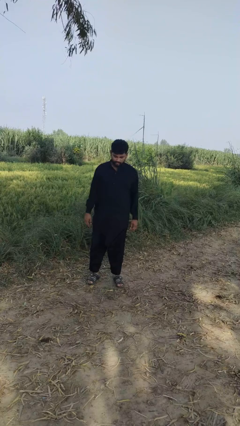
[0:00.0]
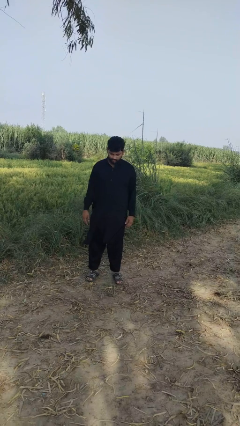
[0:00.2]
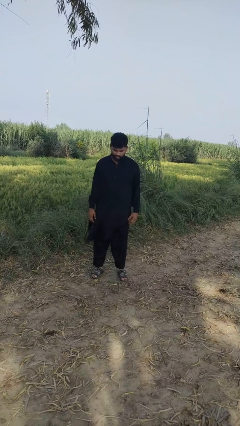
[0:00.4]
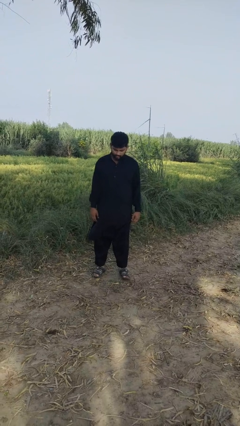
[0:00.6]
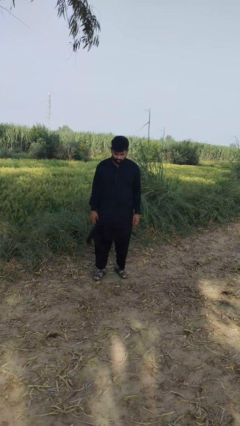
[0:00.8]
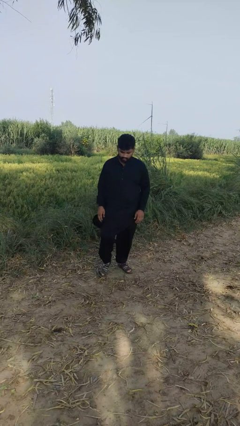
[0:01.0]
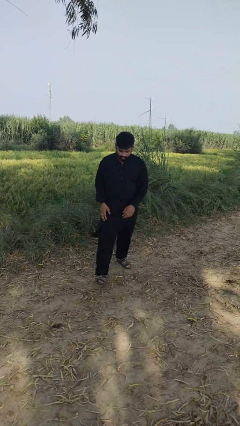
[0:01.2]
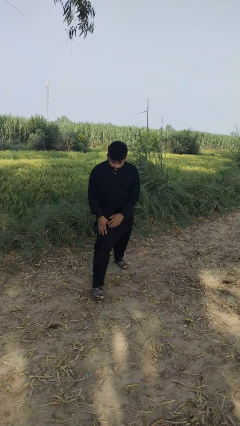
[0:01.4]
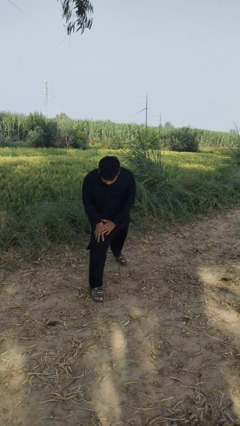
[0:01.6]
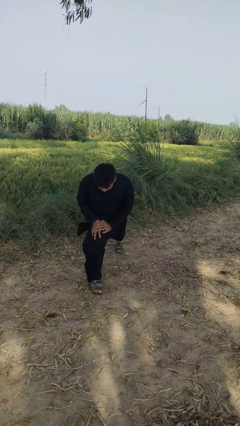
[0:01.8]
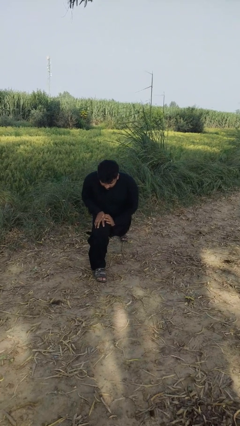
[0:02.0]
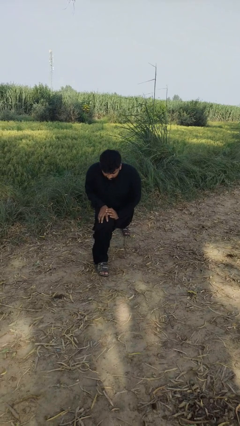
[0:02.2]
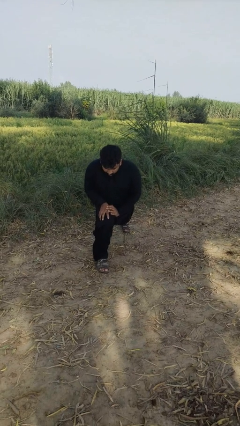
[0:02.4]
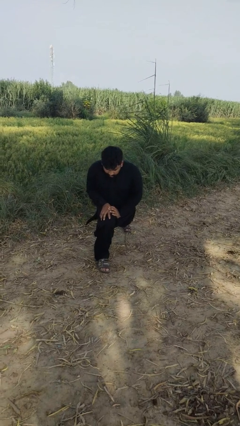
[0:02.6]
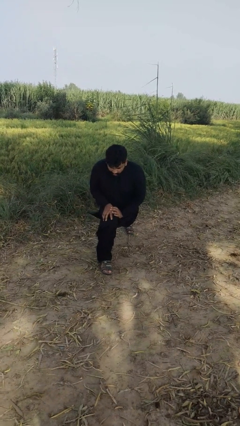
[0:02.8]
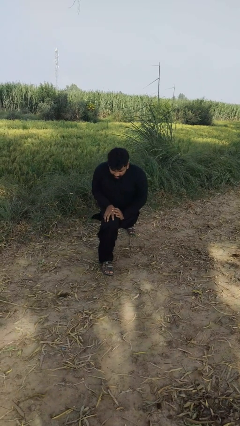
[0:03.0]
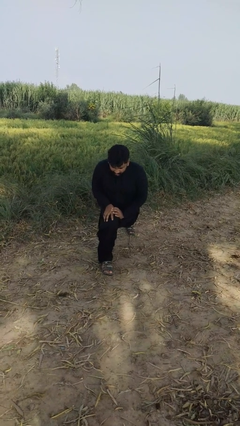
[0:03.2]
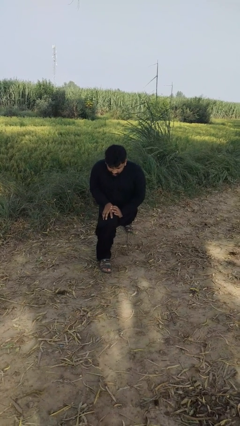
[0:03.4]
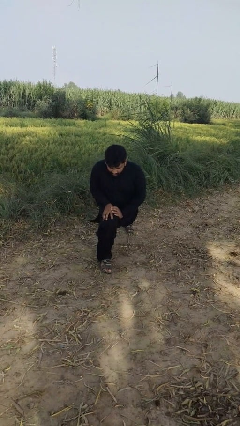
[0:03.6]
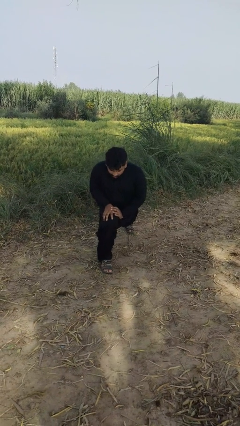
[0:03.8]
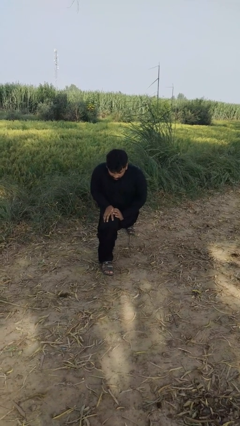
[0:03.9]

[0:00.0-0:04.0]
person exercises with lunges

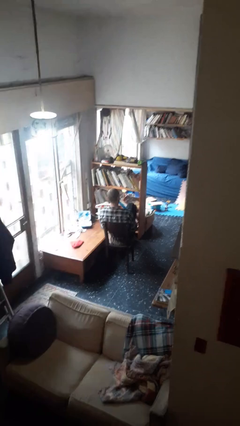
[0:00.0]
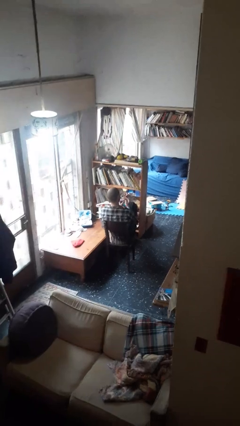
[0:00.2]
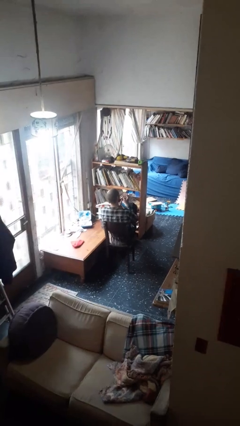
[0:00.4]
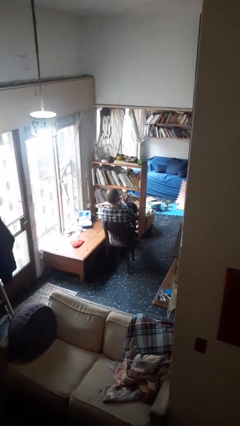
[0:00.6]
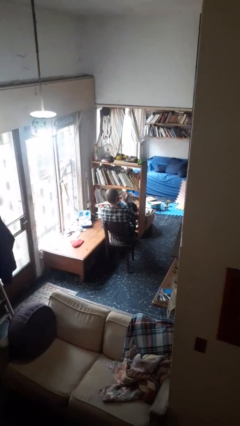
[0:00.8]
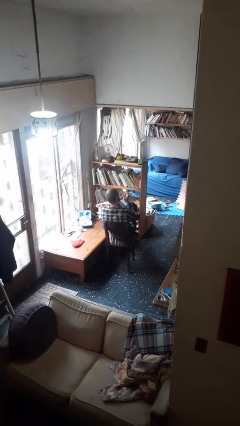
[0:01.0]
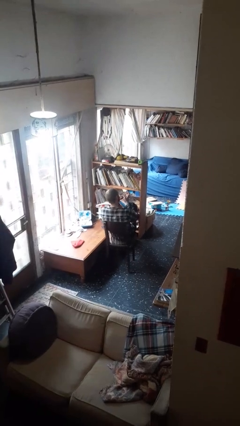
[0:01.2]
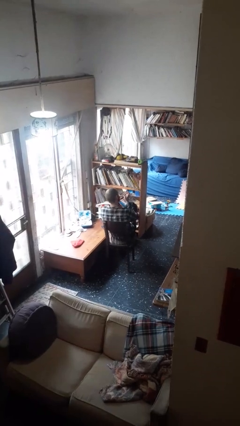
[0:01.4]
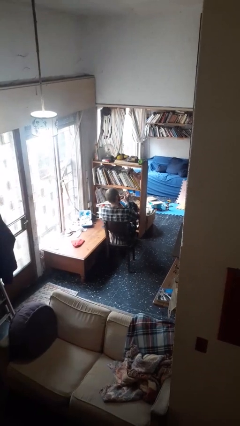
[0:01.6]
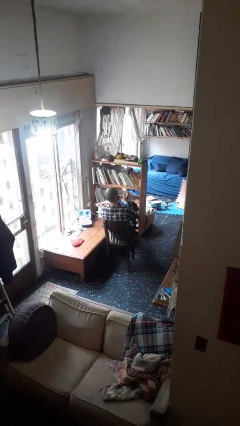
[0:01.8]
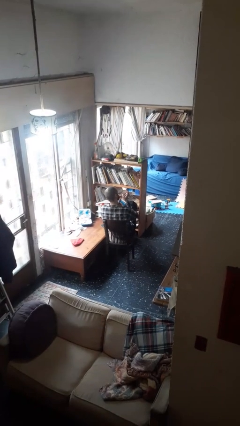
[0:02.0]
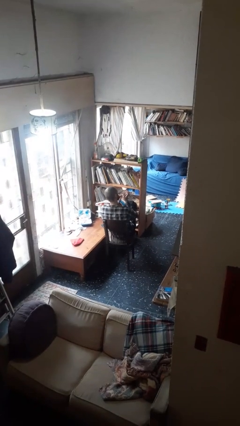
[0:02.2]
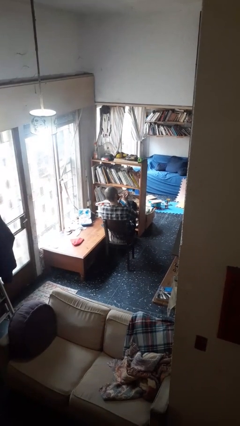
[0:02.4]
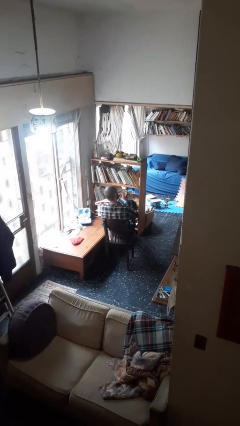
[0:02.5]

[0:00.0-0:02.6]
person files fingernails

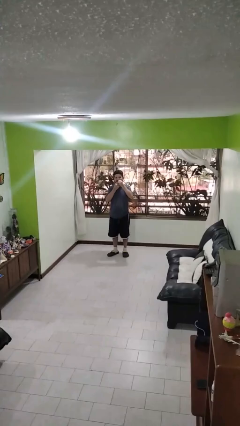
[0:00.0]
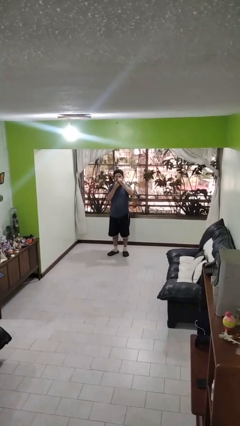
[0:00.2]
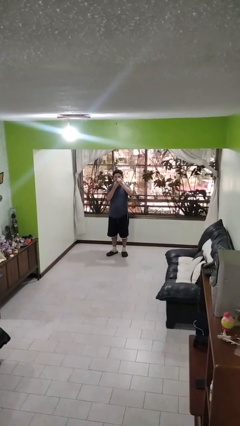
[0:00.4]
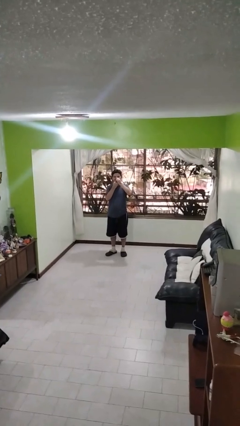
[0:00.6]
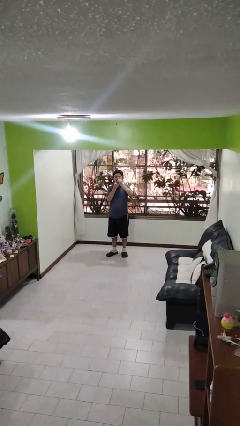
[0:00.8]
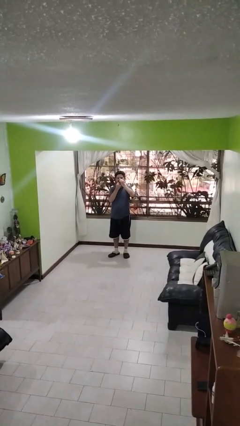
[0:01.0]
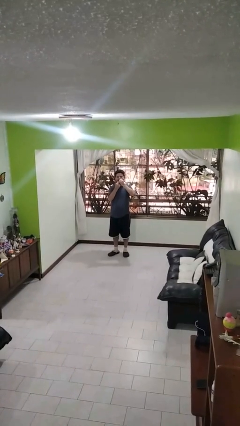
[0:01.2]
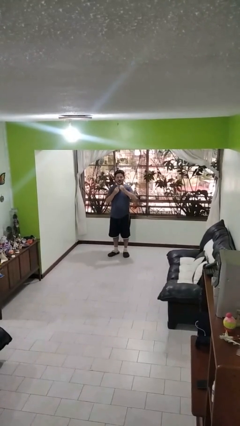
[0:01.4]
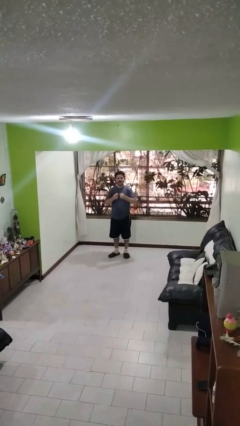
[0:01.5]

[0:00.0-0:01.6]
person flosses

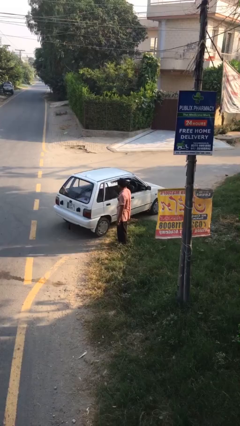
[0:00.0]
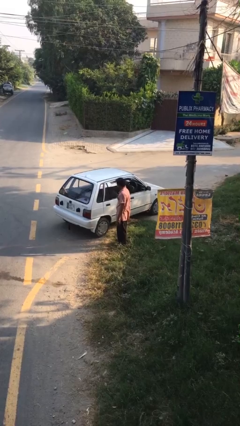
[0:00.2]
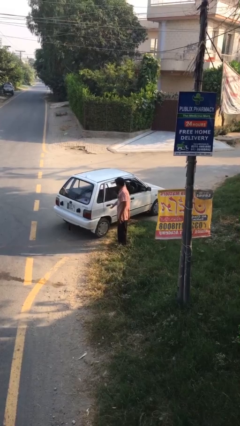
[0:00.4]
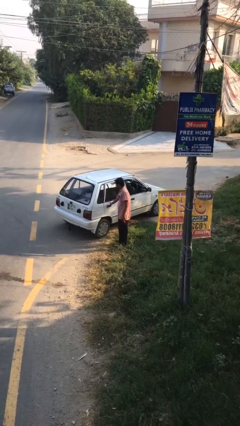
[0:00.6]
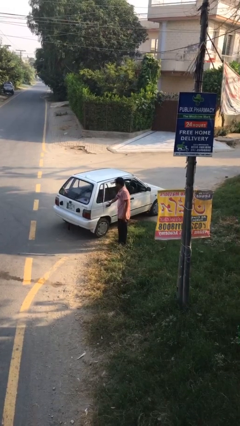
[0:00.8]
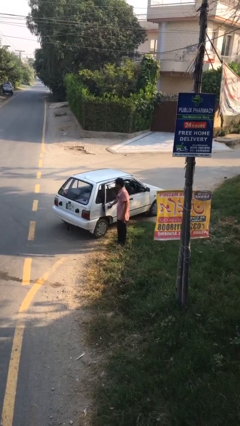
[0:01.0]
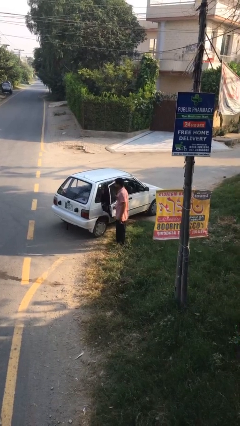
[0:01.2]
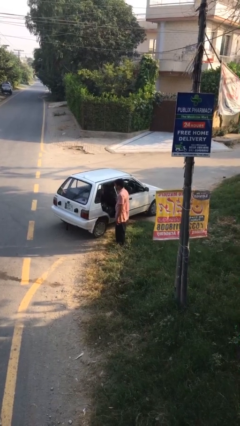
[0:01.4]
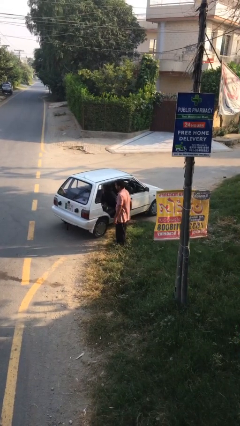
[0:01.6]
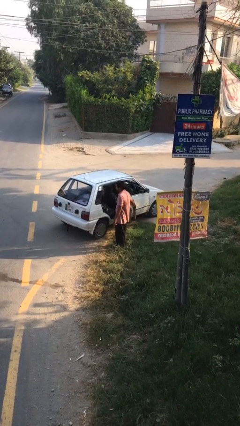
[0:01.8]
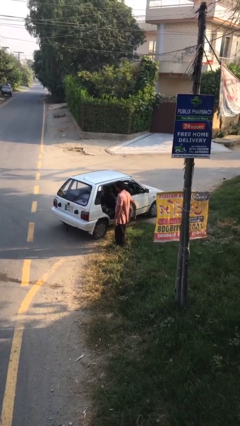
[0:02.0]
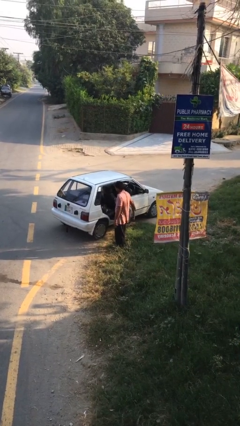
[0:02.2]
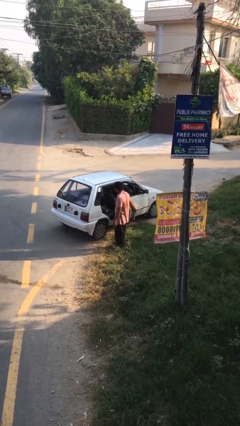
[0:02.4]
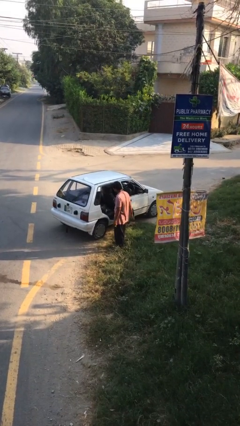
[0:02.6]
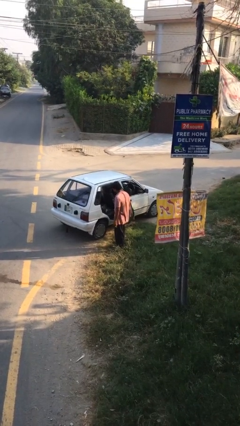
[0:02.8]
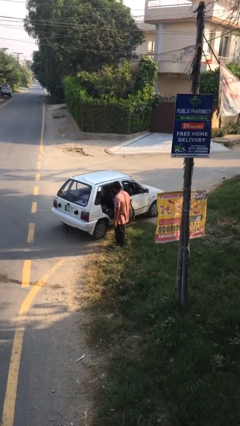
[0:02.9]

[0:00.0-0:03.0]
person opens car door

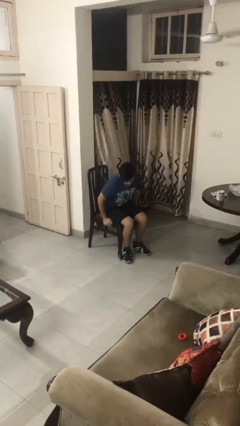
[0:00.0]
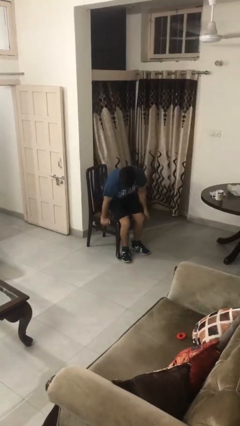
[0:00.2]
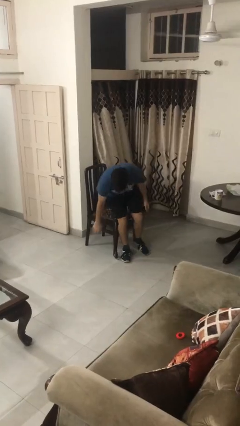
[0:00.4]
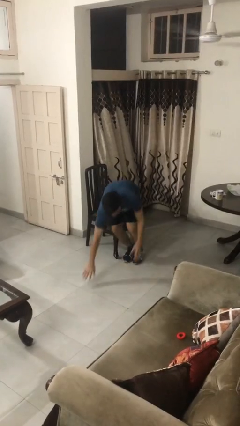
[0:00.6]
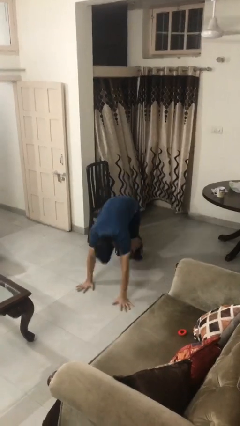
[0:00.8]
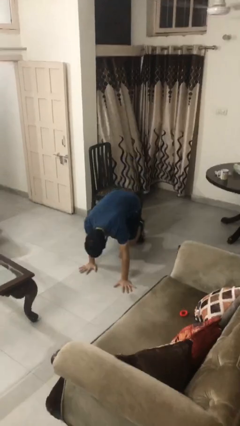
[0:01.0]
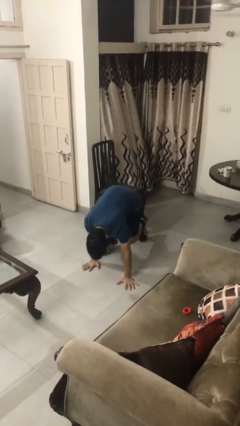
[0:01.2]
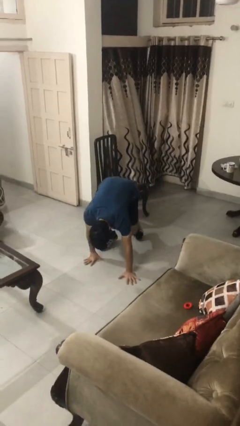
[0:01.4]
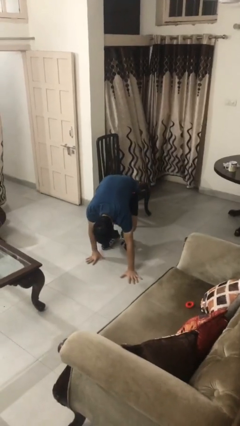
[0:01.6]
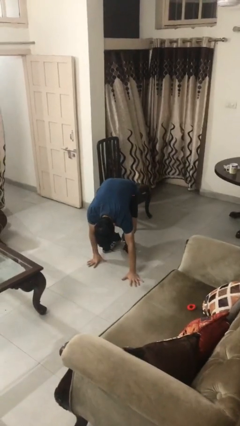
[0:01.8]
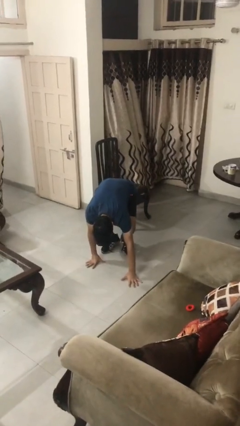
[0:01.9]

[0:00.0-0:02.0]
person falls from chair

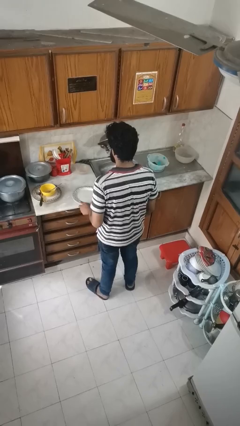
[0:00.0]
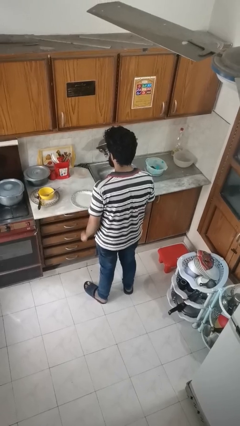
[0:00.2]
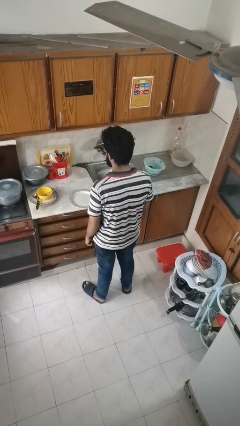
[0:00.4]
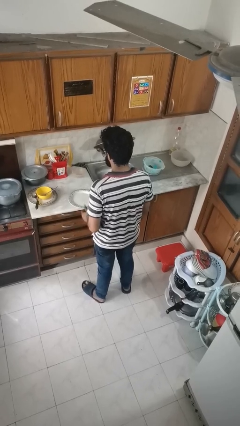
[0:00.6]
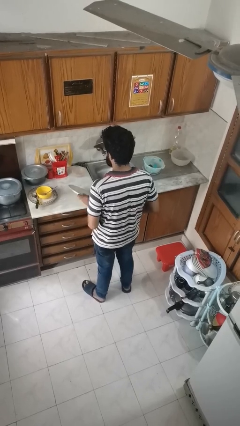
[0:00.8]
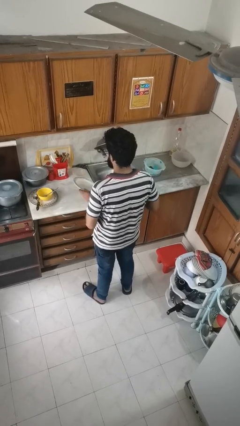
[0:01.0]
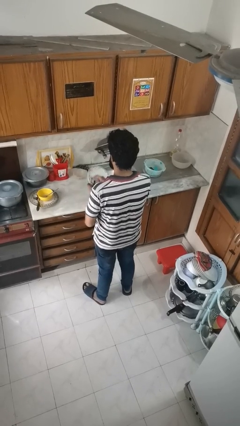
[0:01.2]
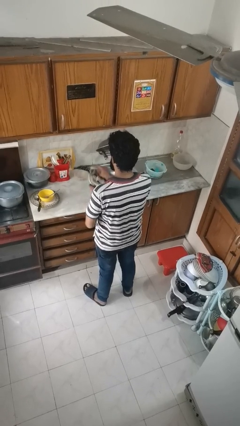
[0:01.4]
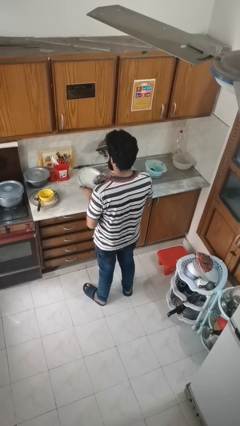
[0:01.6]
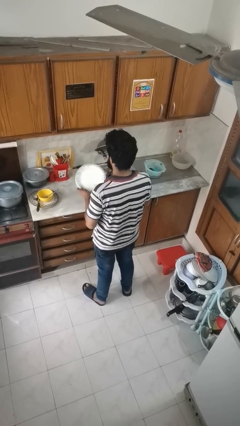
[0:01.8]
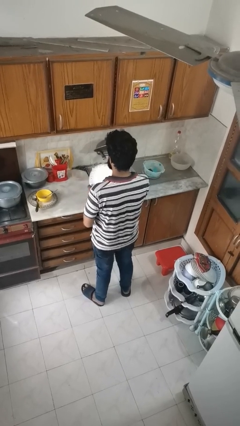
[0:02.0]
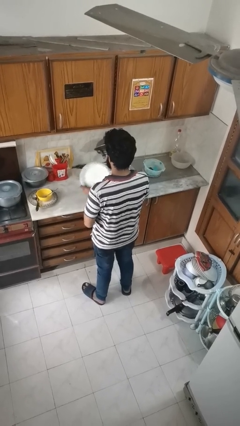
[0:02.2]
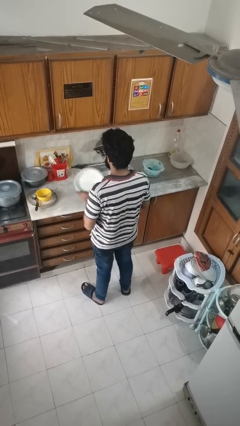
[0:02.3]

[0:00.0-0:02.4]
person dries dish

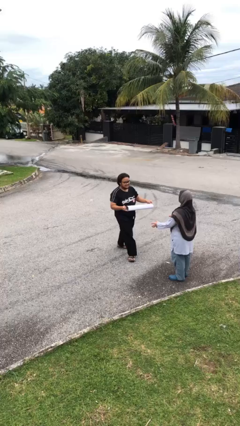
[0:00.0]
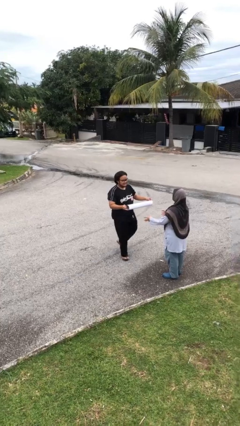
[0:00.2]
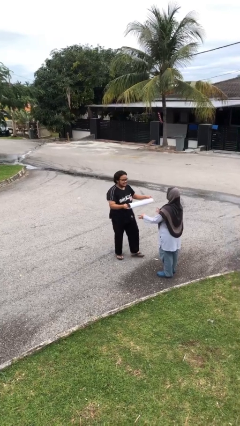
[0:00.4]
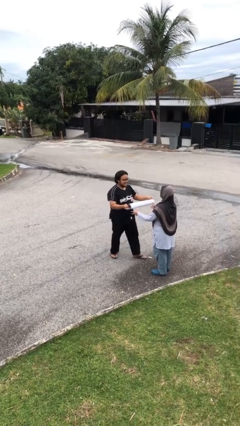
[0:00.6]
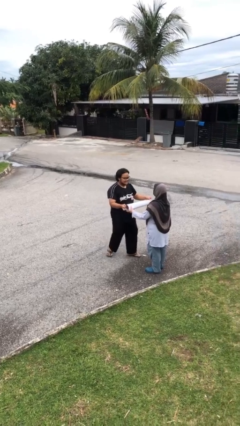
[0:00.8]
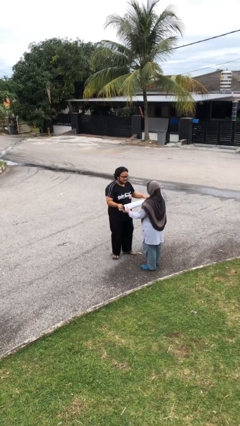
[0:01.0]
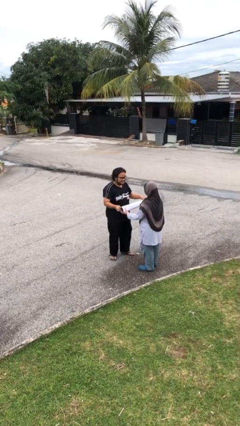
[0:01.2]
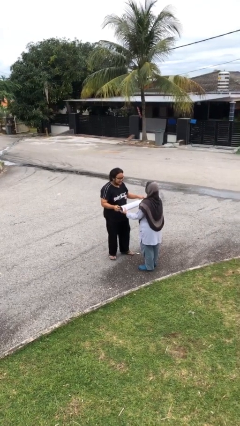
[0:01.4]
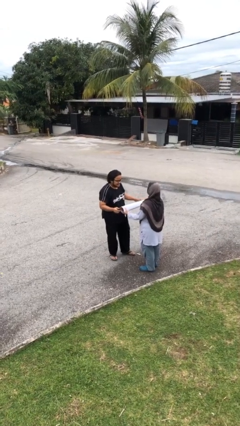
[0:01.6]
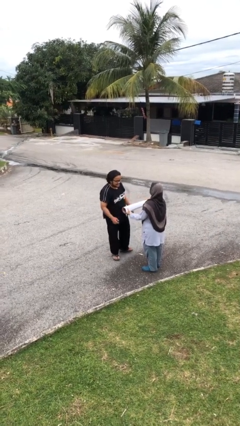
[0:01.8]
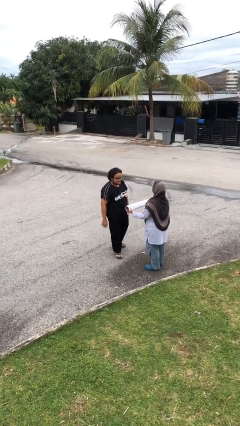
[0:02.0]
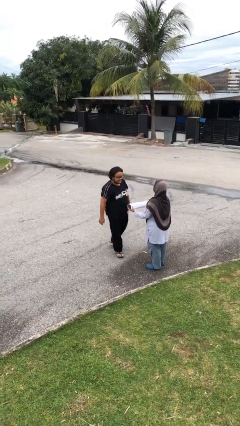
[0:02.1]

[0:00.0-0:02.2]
person transfers object to person
